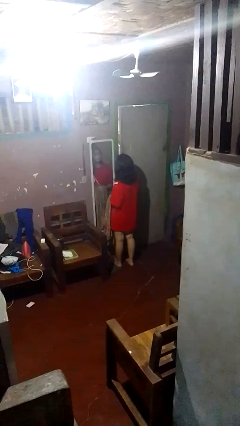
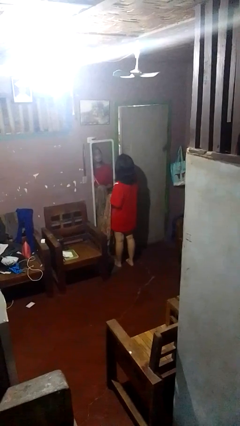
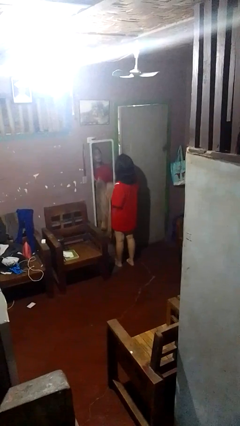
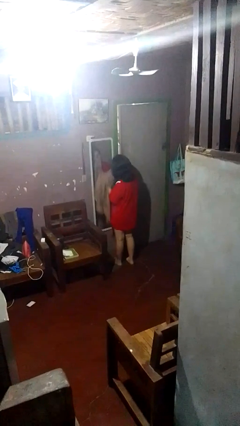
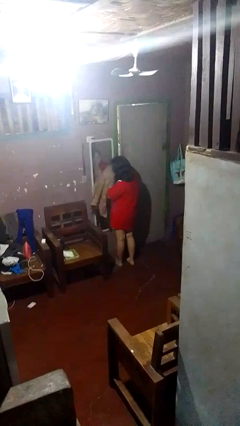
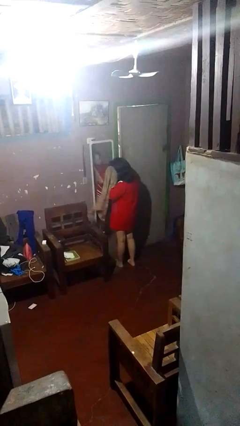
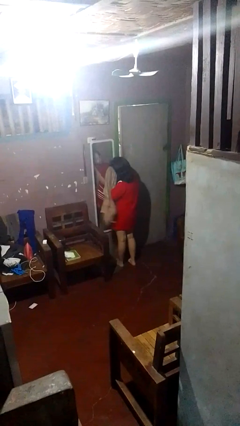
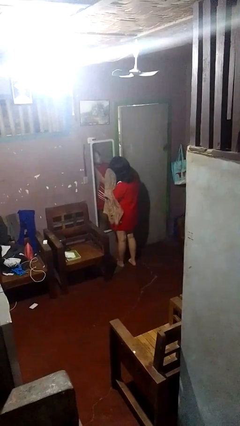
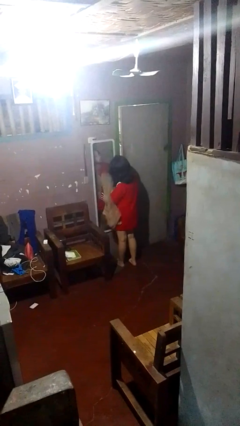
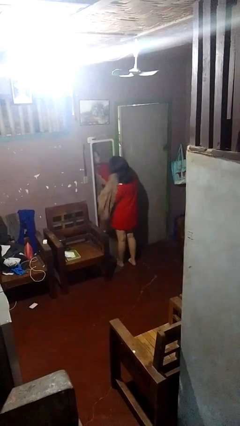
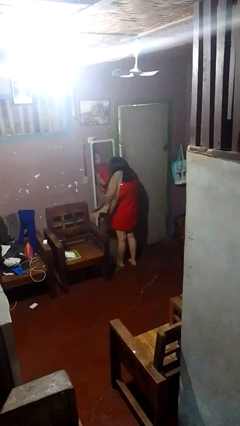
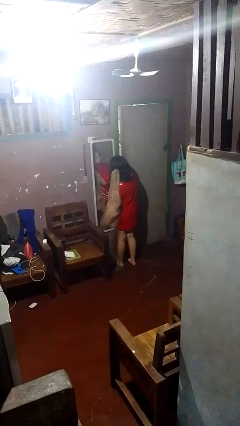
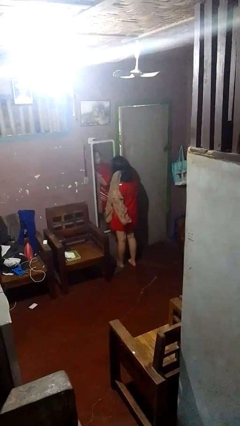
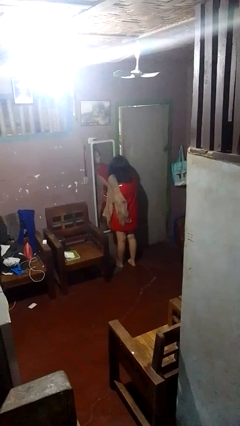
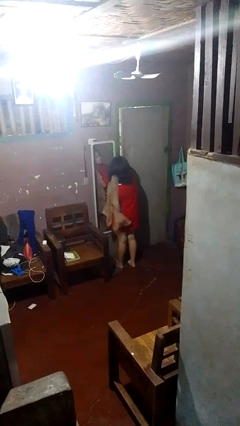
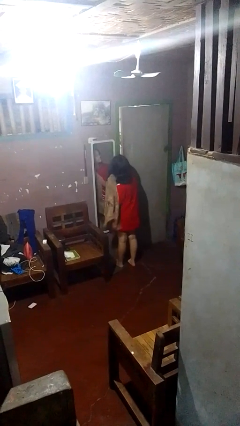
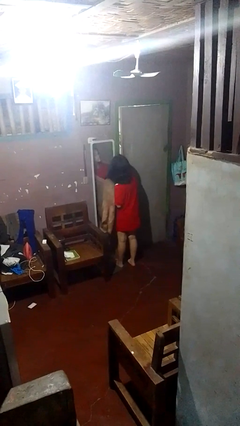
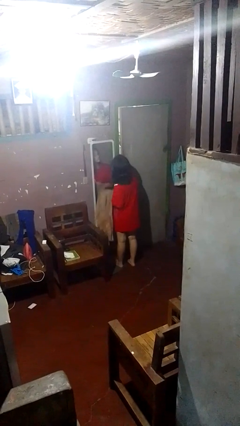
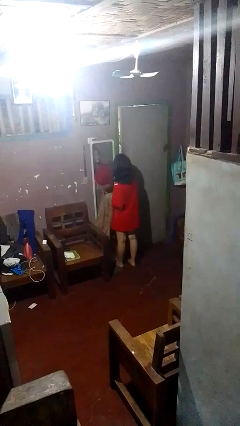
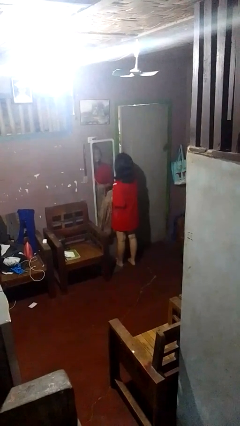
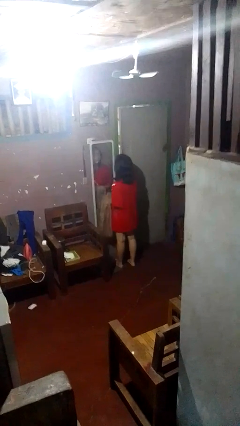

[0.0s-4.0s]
person dries hair with towel

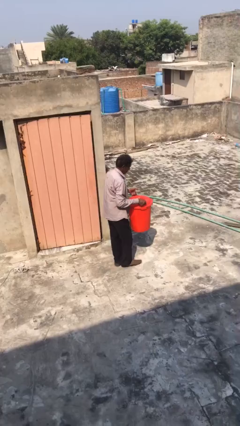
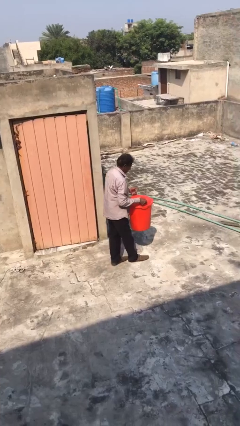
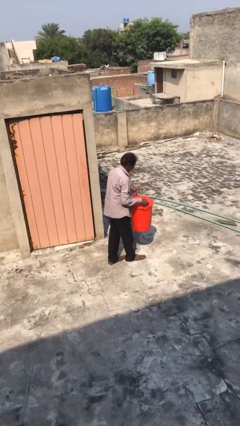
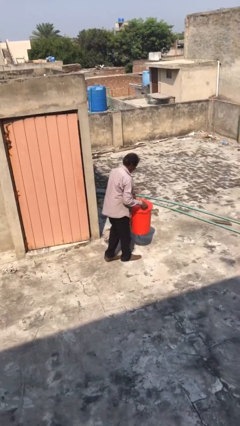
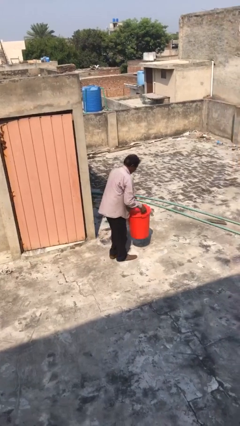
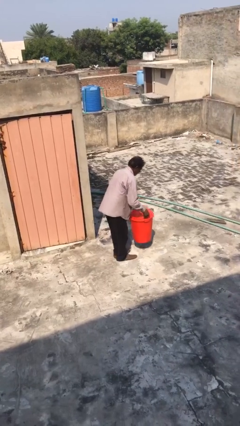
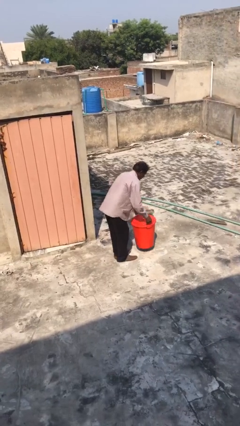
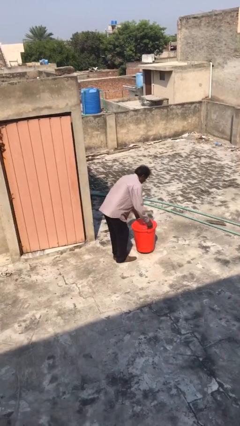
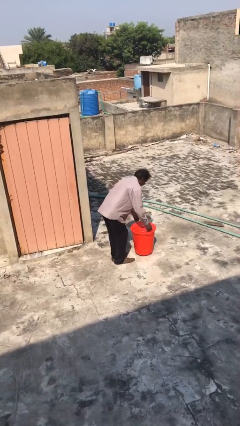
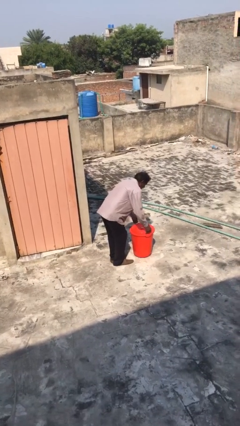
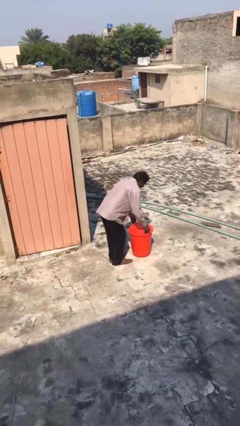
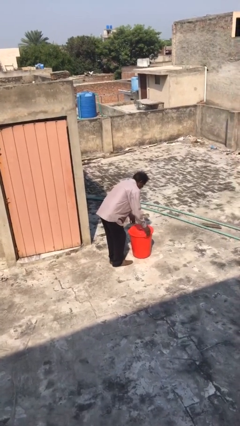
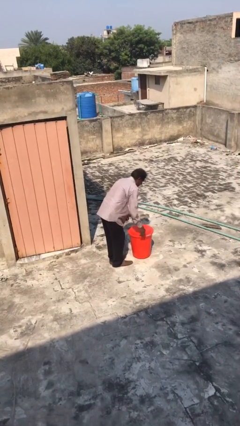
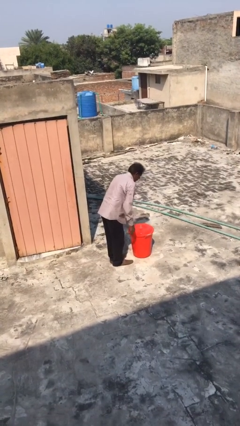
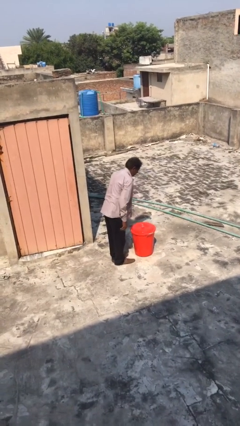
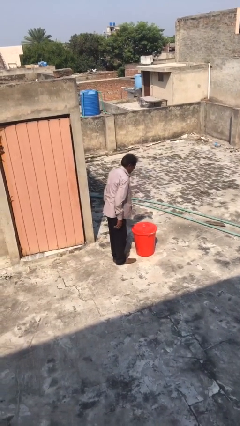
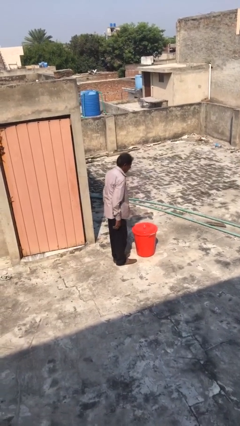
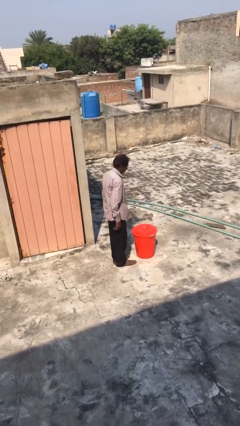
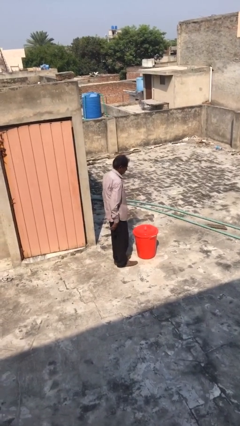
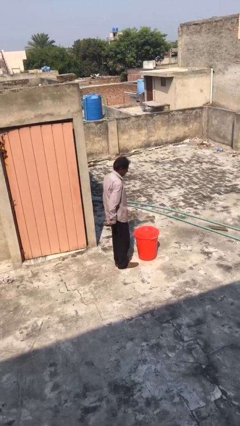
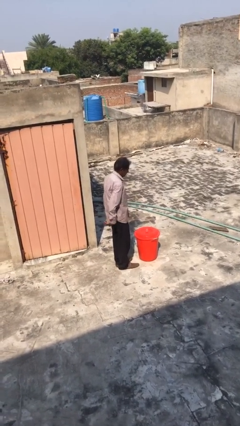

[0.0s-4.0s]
person puts down object on floor

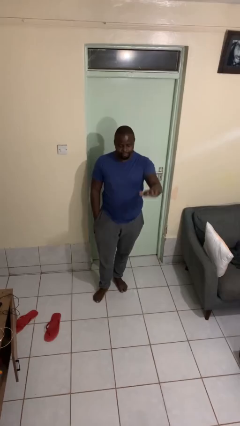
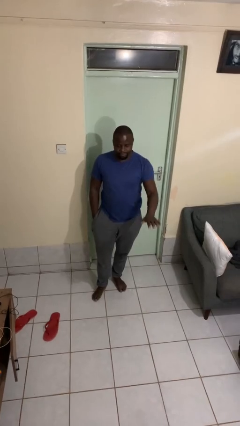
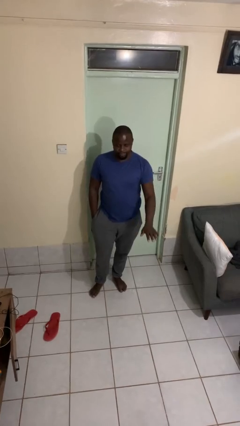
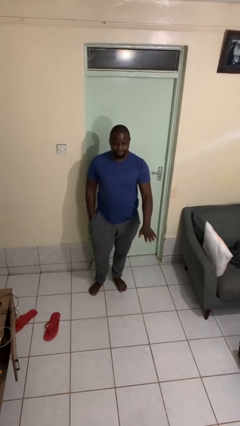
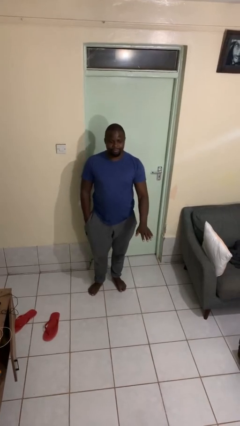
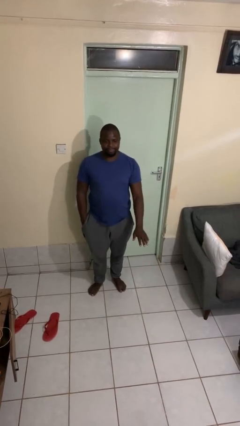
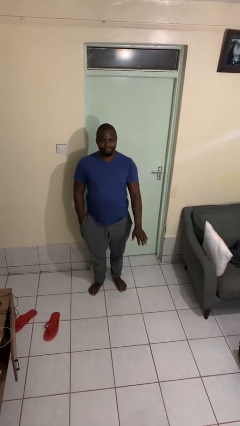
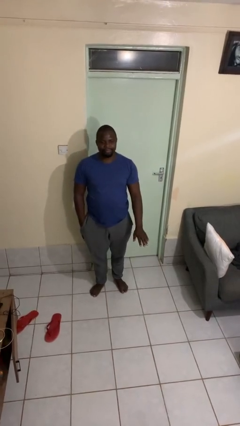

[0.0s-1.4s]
person gestures swipe down

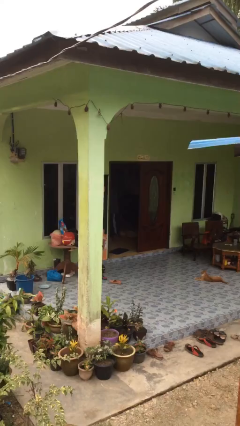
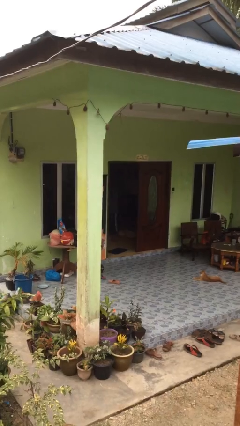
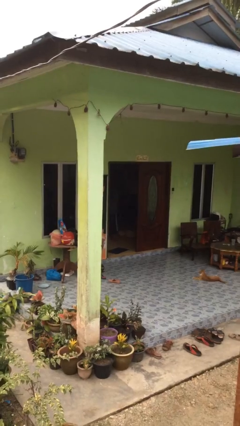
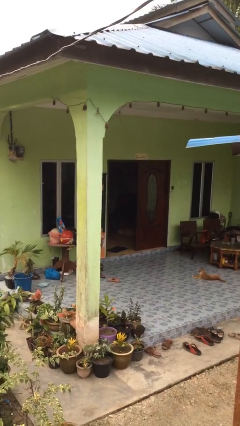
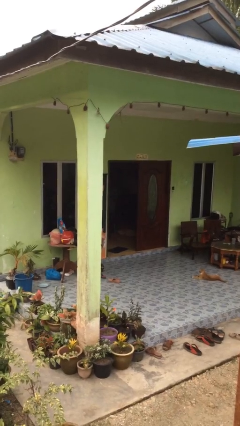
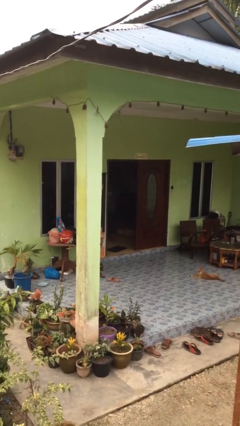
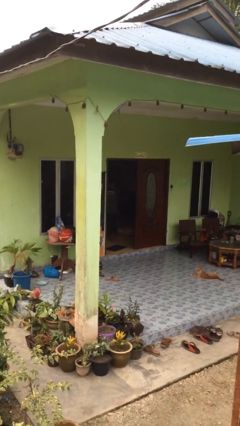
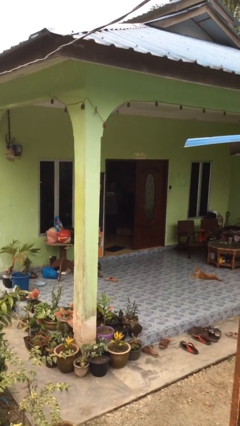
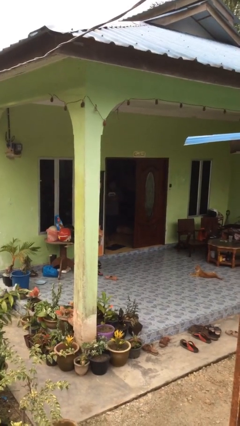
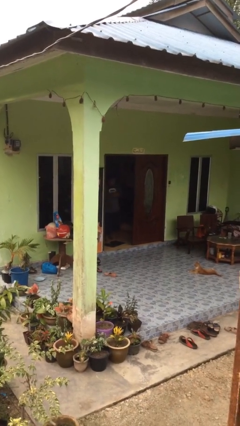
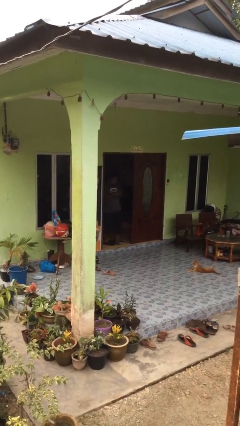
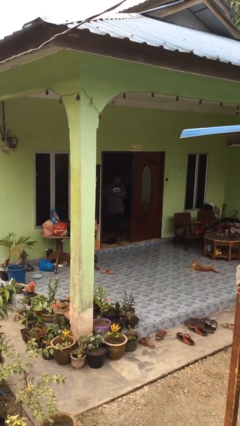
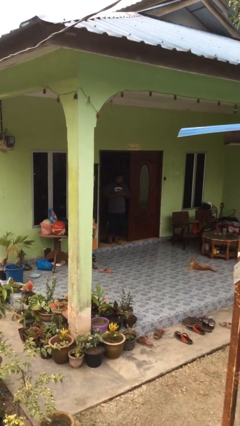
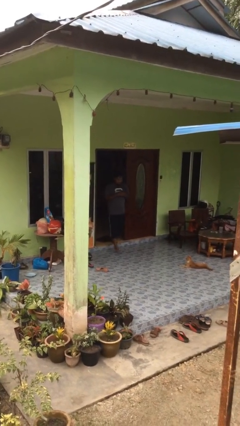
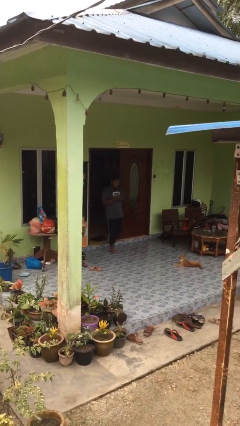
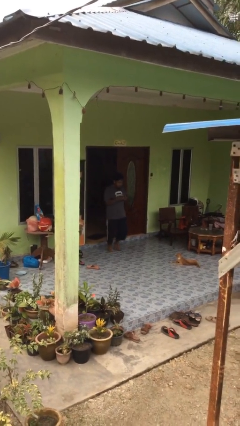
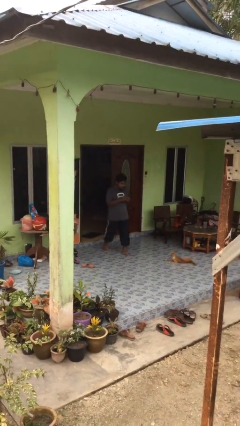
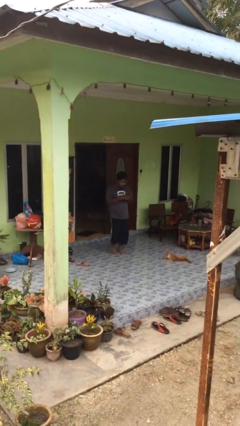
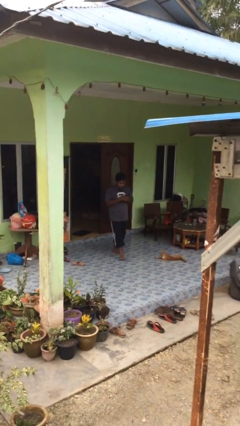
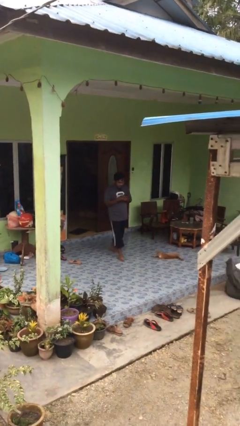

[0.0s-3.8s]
person enters scene through structure

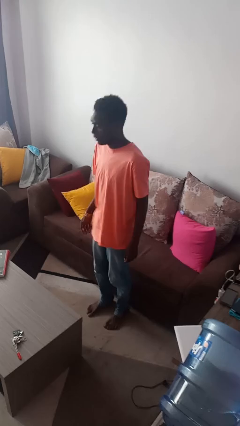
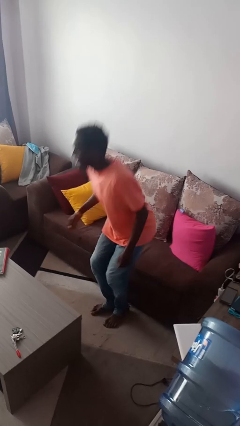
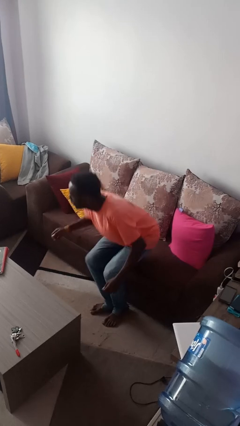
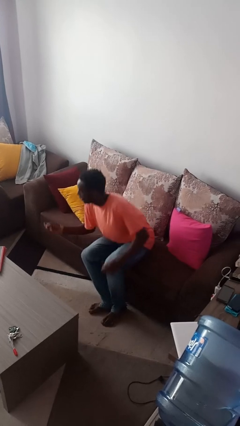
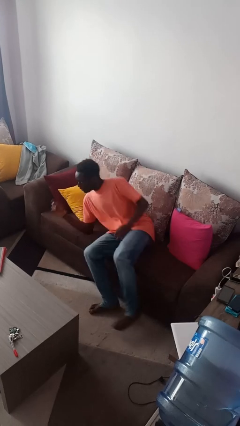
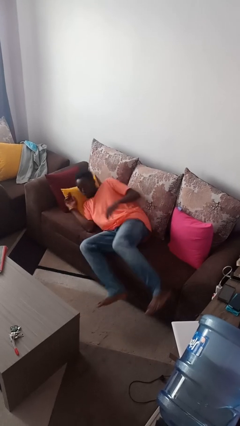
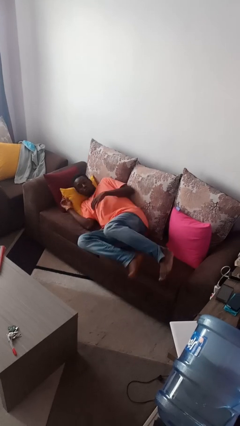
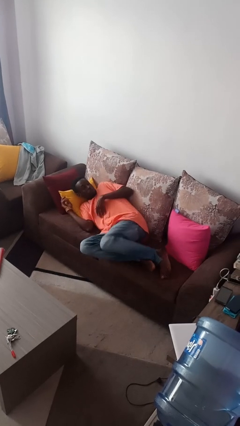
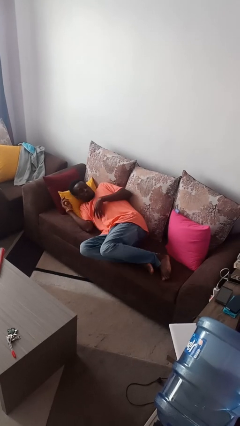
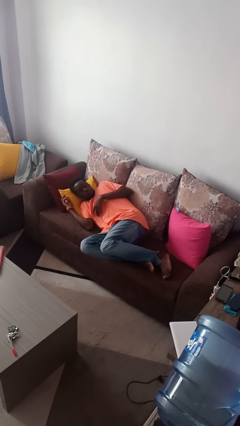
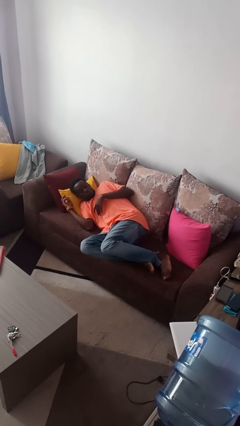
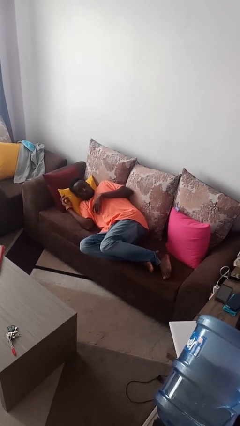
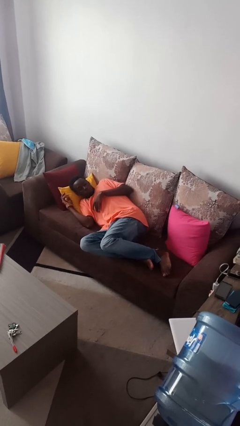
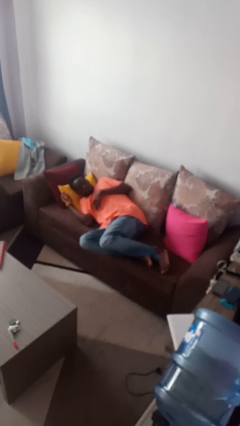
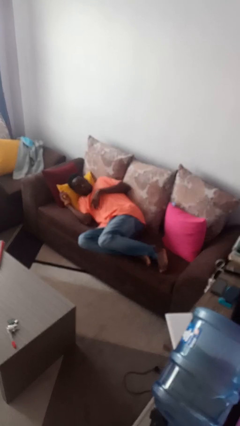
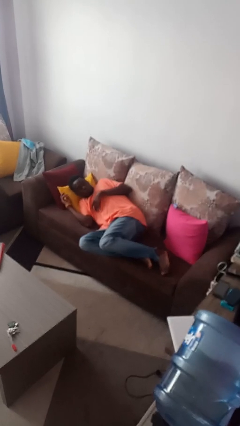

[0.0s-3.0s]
person lies down on couch

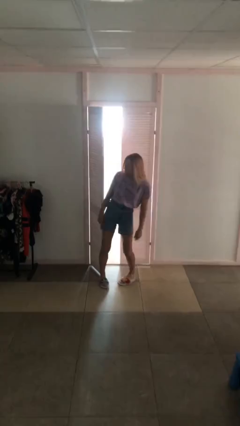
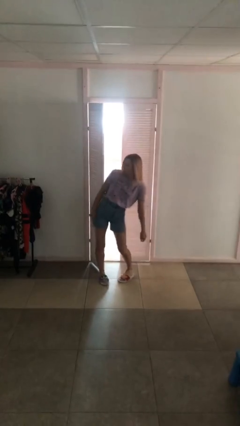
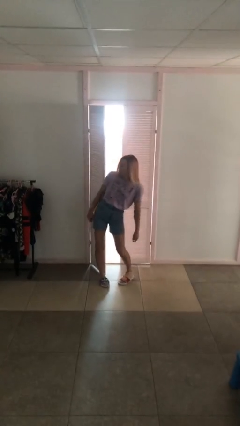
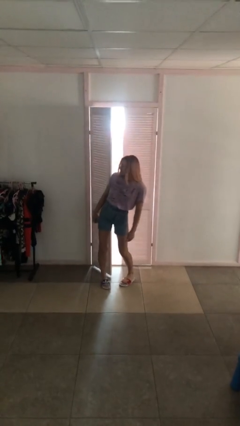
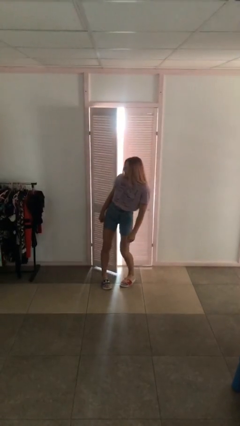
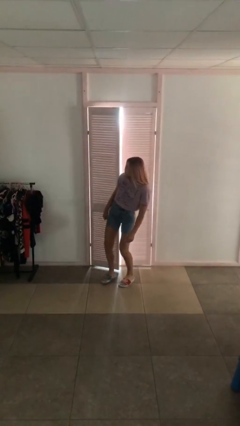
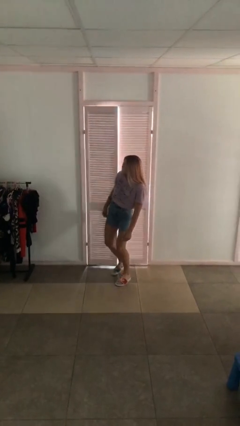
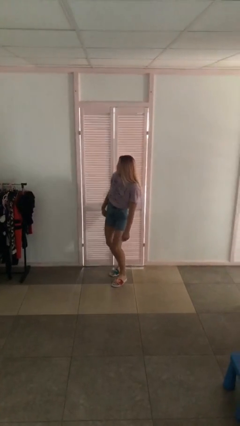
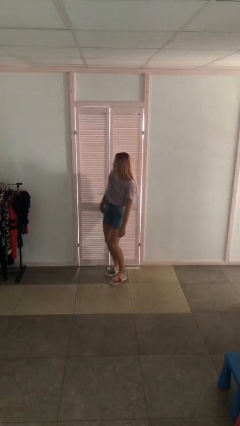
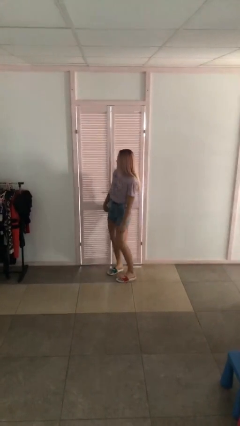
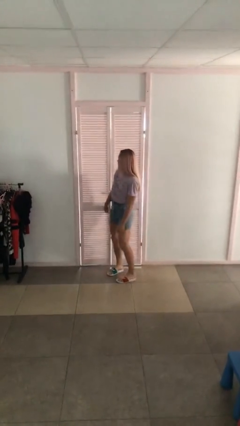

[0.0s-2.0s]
person closes door with hip
